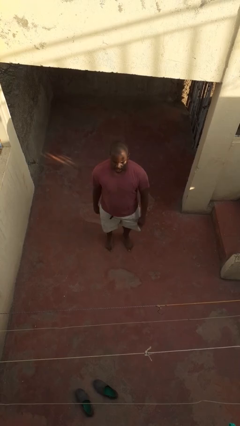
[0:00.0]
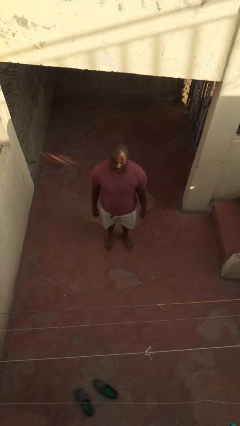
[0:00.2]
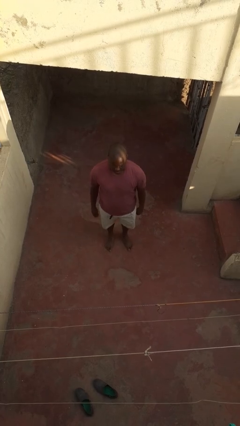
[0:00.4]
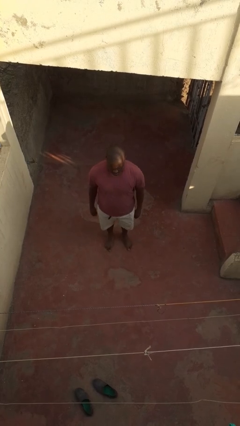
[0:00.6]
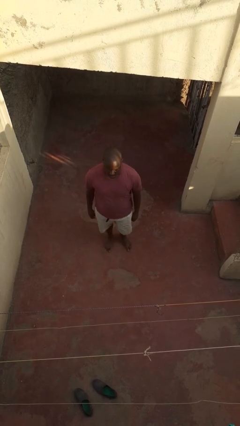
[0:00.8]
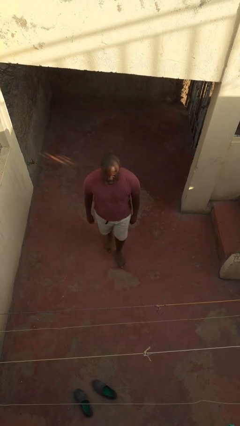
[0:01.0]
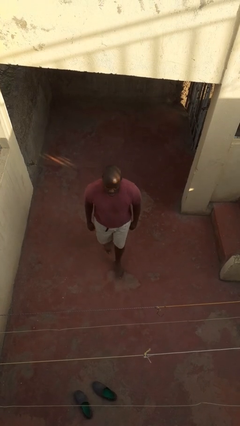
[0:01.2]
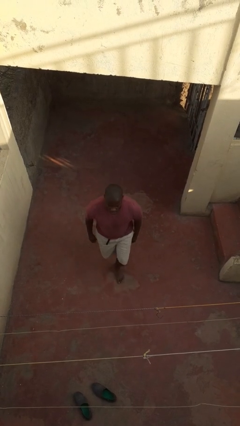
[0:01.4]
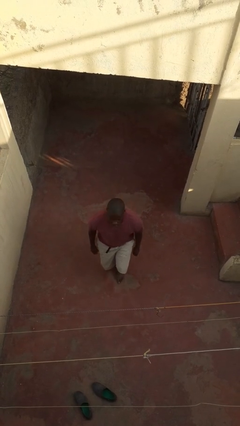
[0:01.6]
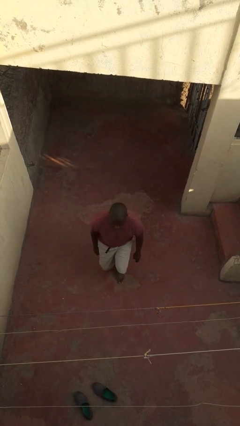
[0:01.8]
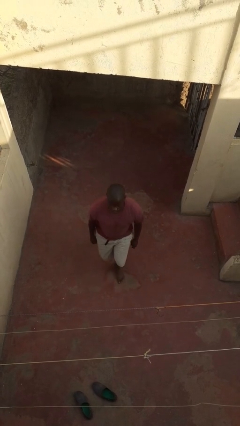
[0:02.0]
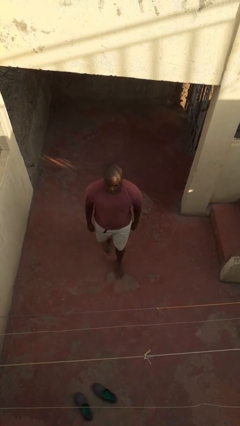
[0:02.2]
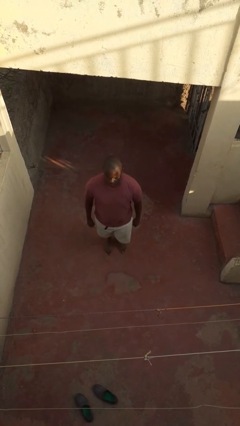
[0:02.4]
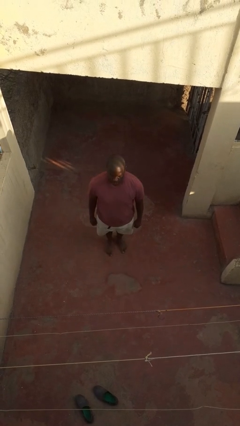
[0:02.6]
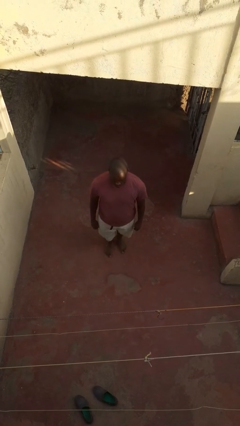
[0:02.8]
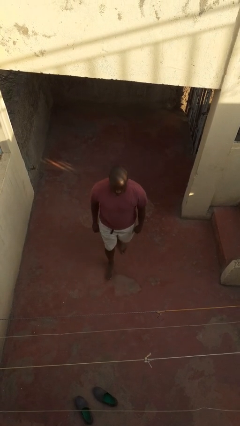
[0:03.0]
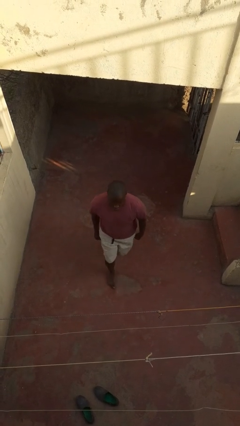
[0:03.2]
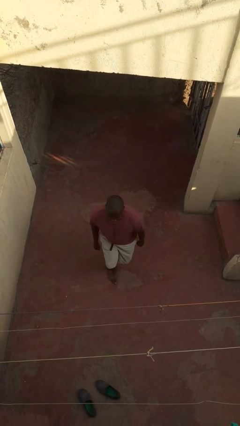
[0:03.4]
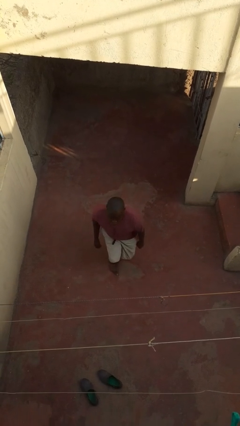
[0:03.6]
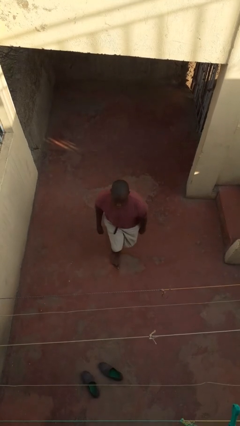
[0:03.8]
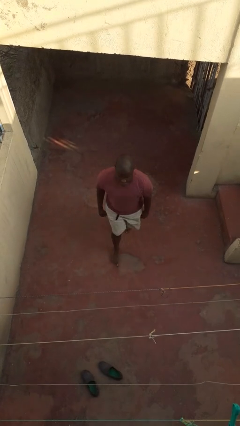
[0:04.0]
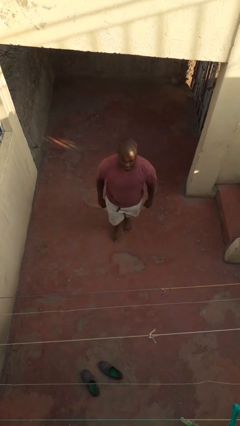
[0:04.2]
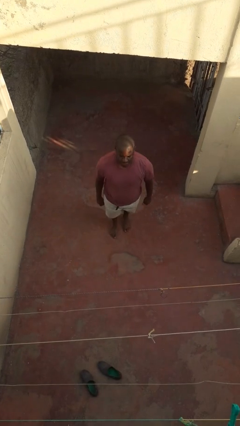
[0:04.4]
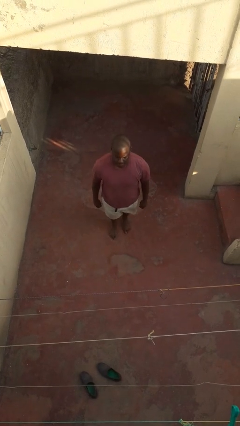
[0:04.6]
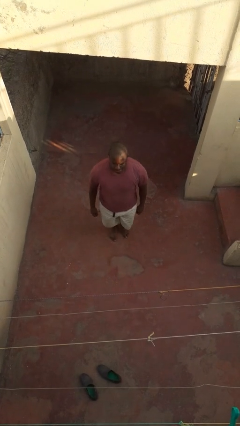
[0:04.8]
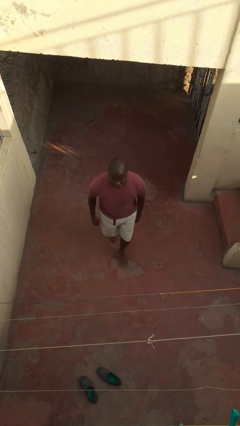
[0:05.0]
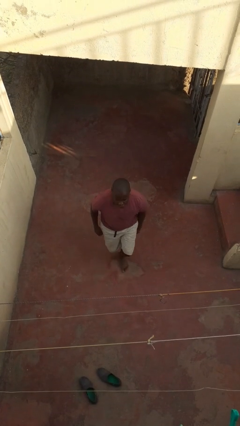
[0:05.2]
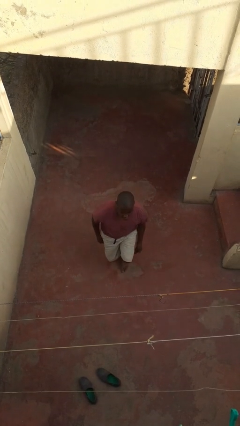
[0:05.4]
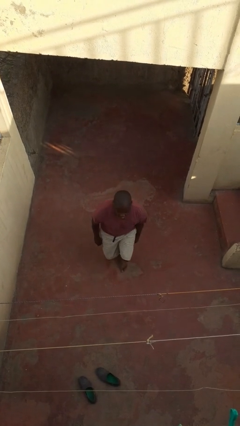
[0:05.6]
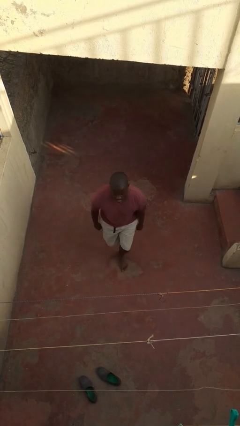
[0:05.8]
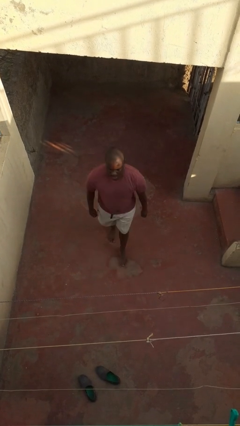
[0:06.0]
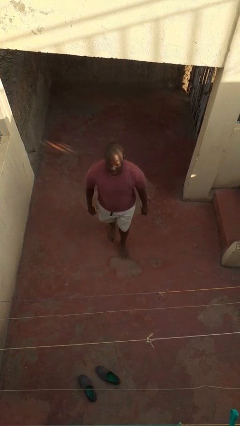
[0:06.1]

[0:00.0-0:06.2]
person exercises with lunges

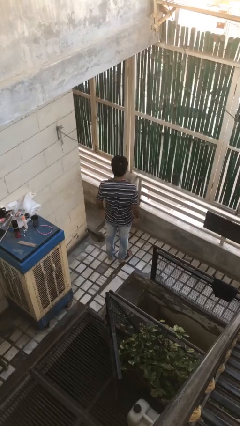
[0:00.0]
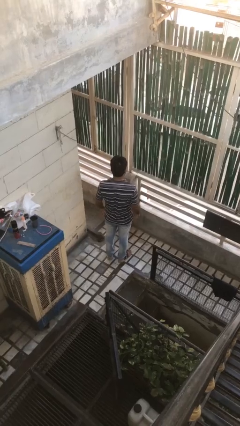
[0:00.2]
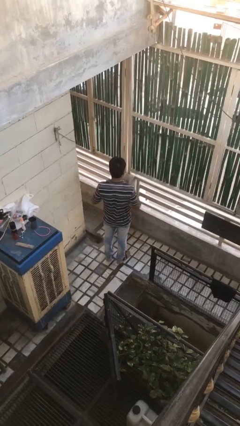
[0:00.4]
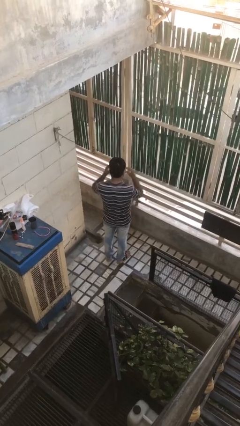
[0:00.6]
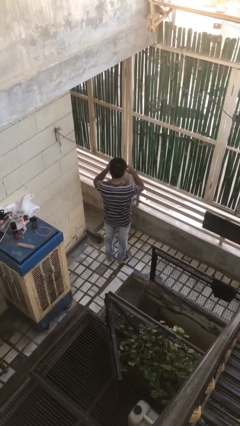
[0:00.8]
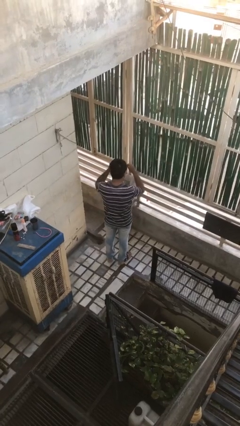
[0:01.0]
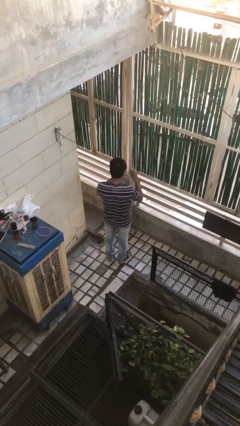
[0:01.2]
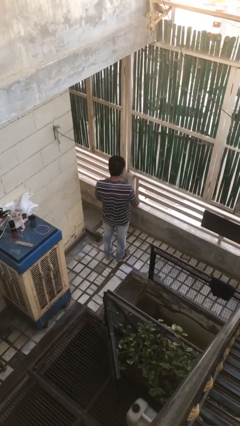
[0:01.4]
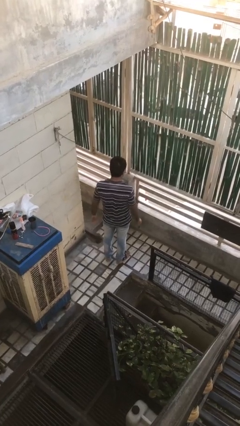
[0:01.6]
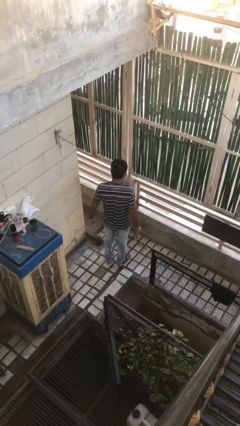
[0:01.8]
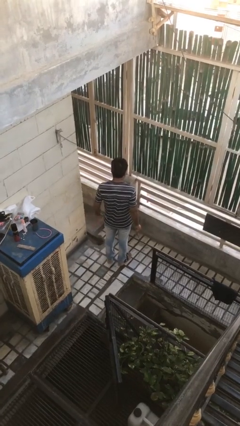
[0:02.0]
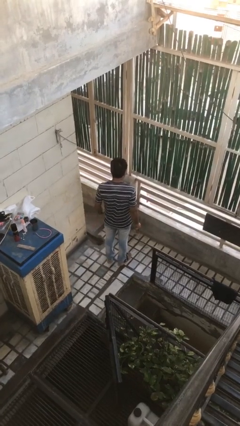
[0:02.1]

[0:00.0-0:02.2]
person takes off sunglasses

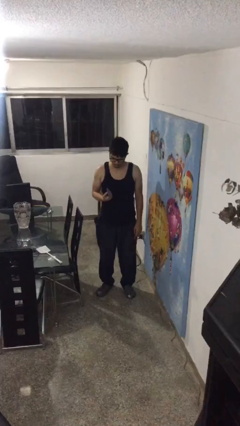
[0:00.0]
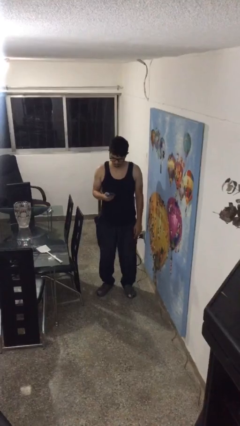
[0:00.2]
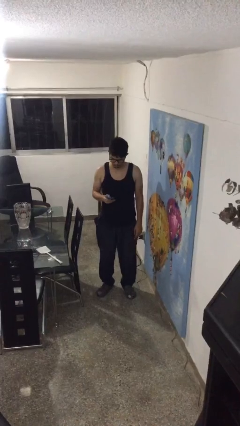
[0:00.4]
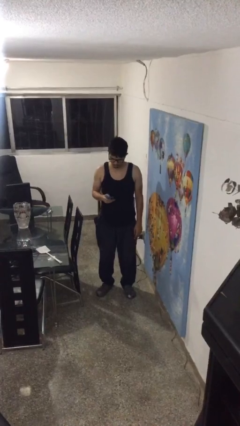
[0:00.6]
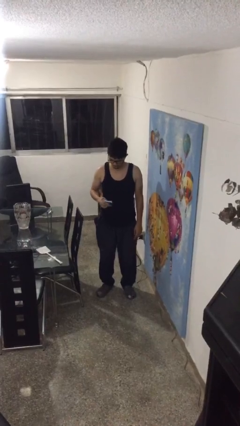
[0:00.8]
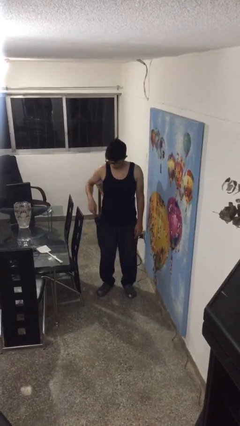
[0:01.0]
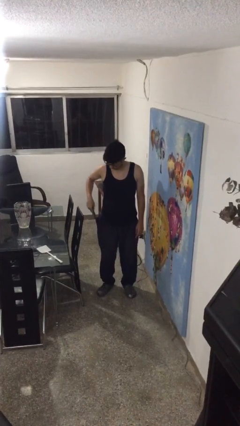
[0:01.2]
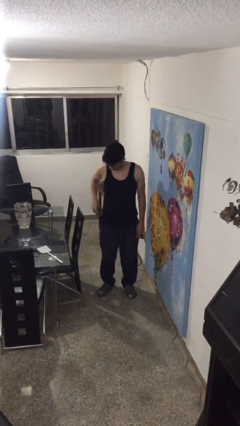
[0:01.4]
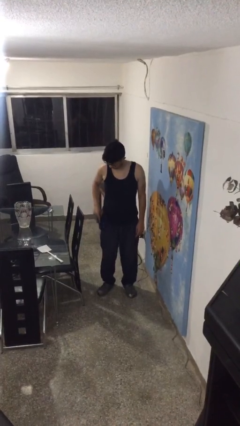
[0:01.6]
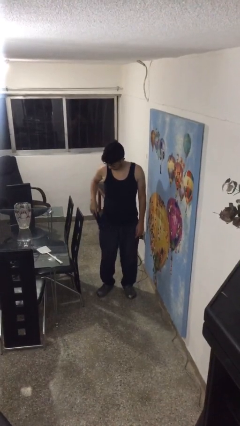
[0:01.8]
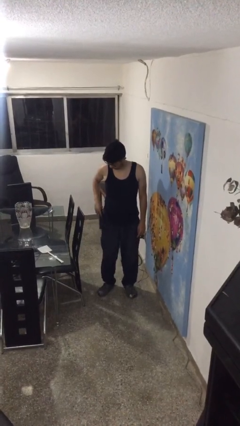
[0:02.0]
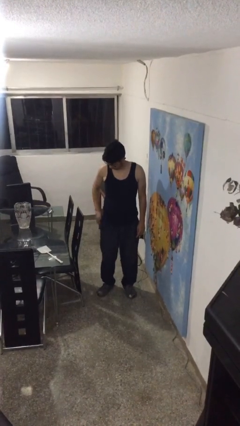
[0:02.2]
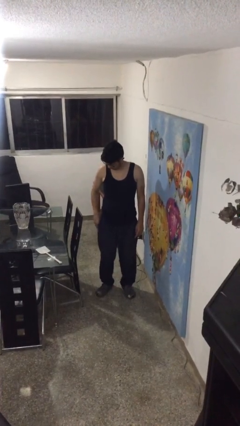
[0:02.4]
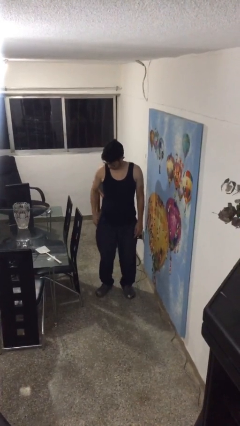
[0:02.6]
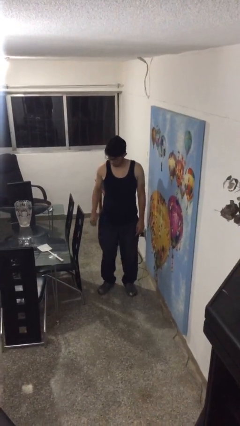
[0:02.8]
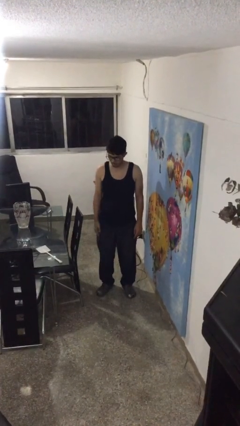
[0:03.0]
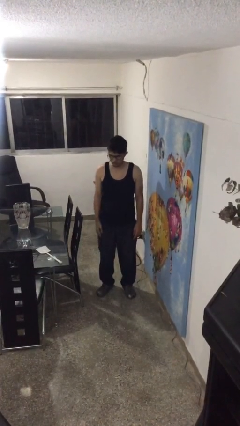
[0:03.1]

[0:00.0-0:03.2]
person puts phone into pocket

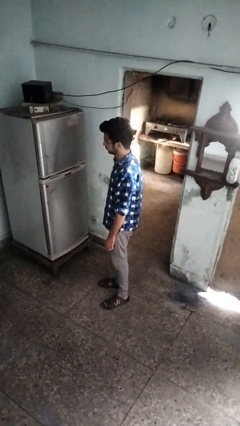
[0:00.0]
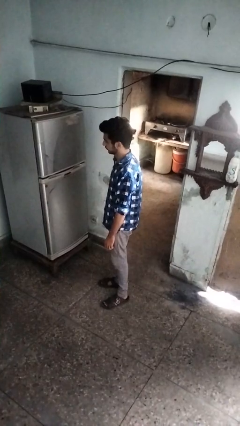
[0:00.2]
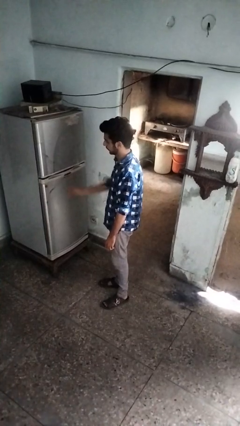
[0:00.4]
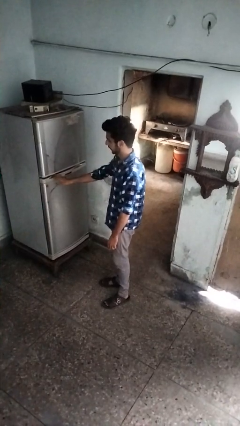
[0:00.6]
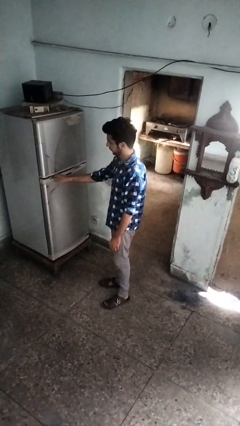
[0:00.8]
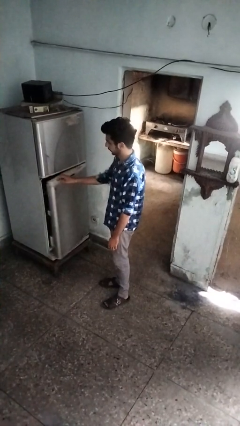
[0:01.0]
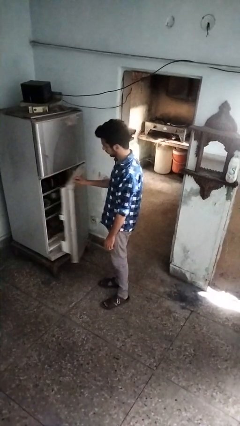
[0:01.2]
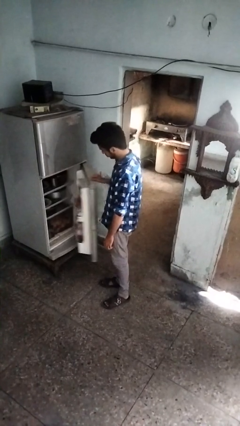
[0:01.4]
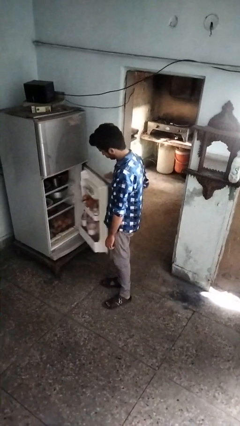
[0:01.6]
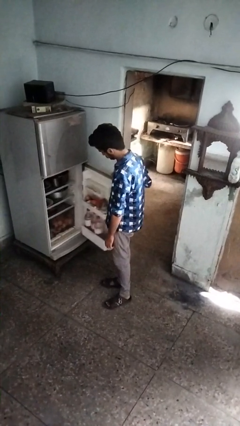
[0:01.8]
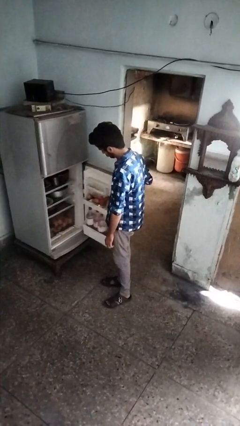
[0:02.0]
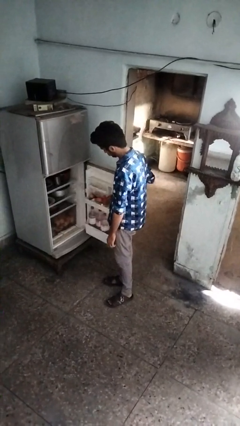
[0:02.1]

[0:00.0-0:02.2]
person opens refrigerator

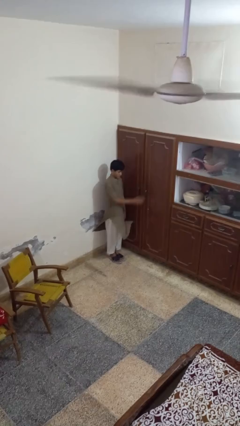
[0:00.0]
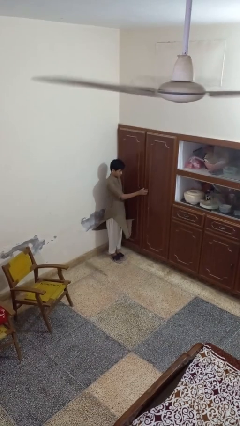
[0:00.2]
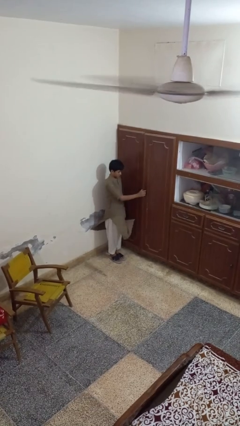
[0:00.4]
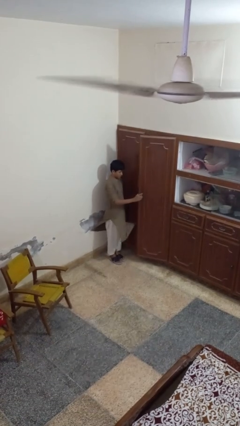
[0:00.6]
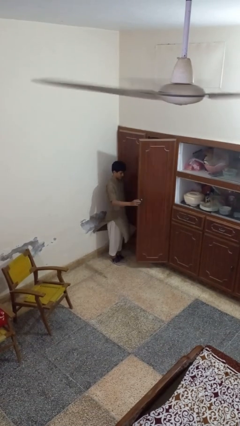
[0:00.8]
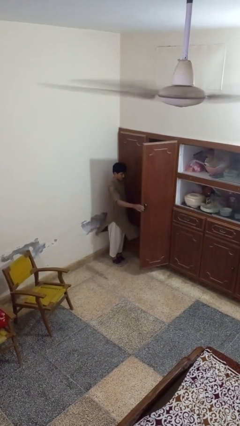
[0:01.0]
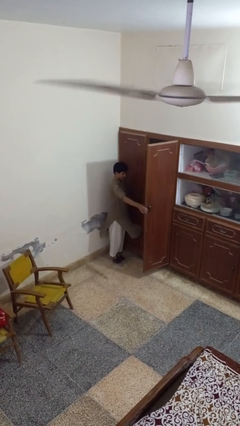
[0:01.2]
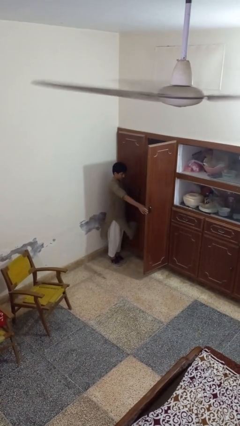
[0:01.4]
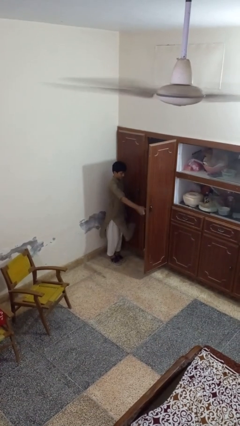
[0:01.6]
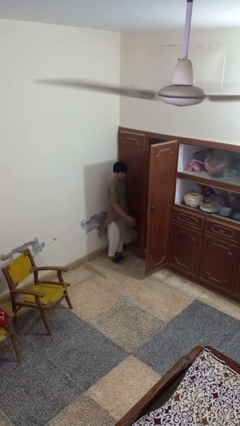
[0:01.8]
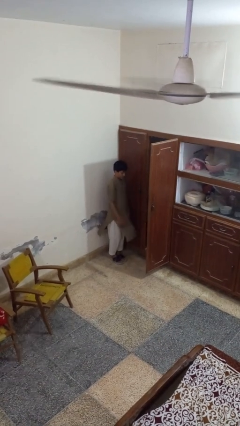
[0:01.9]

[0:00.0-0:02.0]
person opens closet door

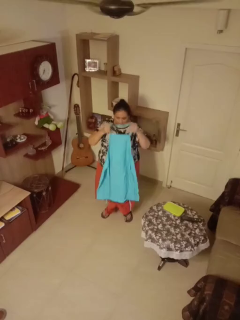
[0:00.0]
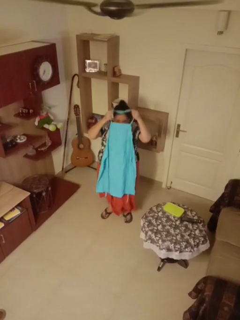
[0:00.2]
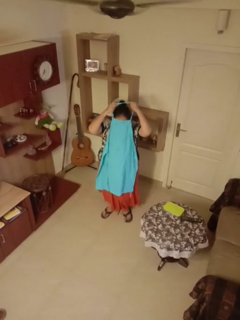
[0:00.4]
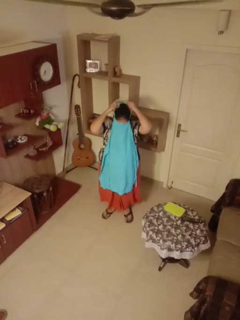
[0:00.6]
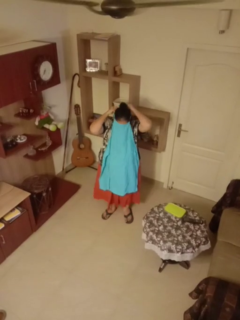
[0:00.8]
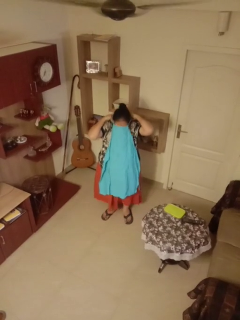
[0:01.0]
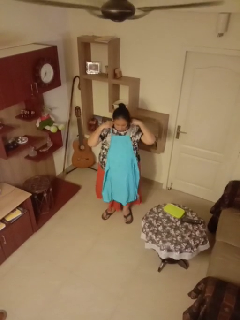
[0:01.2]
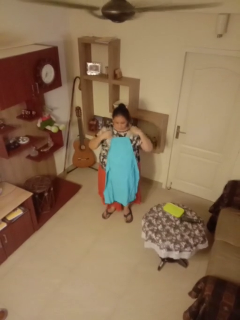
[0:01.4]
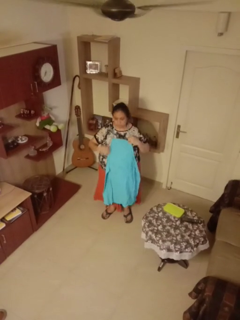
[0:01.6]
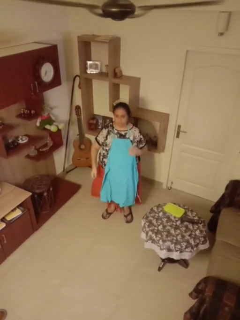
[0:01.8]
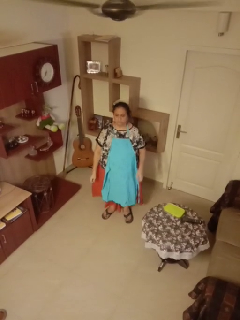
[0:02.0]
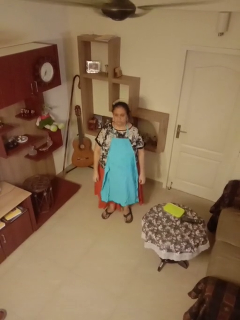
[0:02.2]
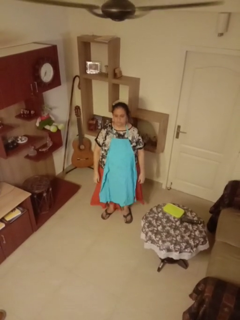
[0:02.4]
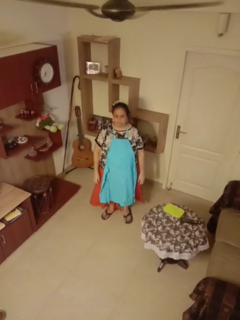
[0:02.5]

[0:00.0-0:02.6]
person puts on apron
